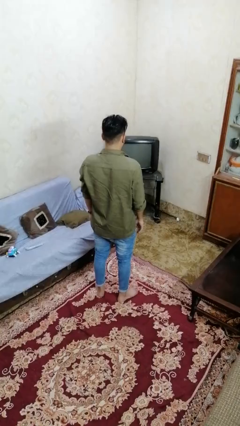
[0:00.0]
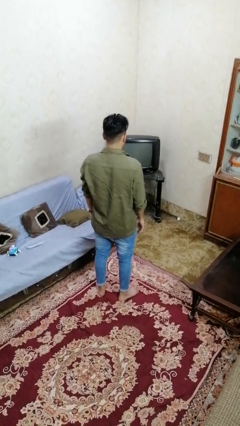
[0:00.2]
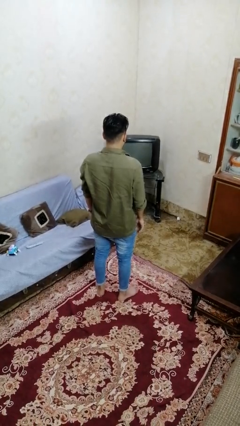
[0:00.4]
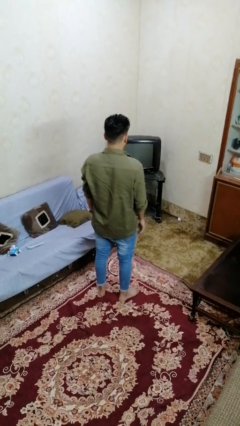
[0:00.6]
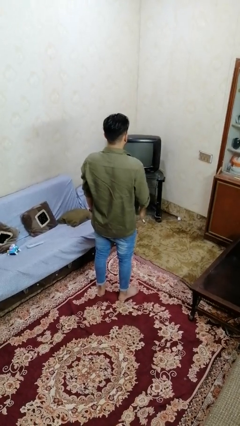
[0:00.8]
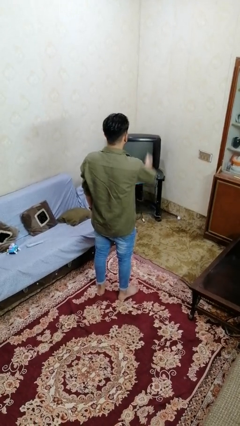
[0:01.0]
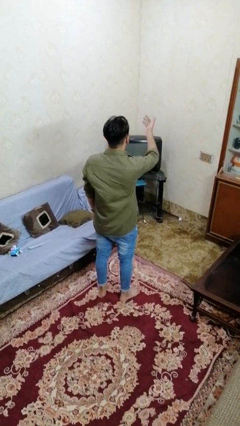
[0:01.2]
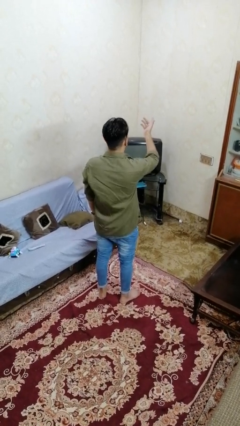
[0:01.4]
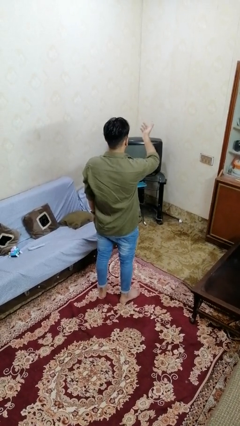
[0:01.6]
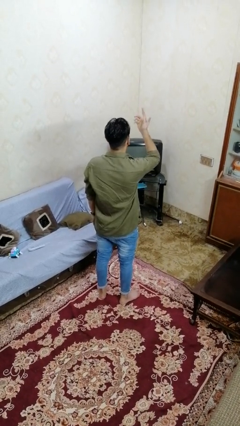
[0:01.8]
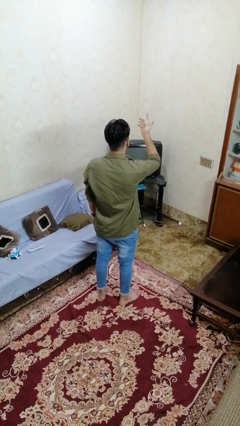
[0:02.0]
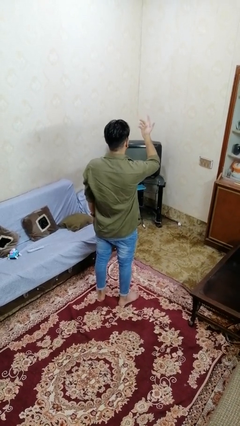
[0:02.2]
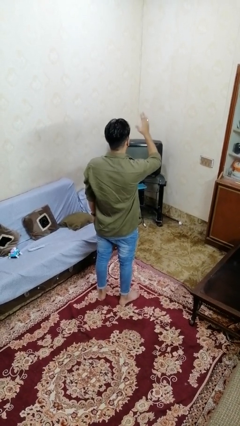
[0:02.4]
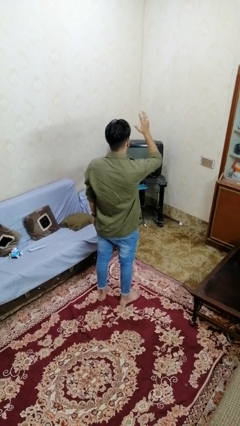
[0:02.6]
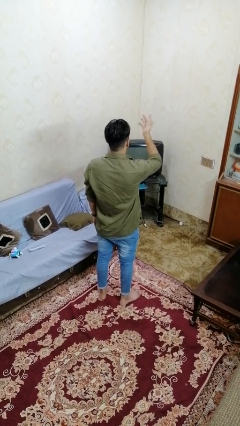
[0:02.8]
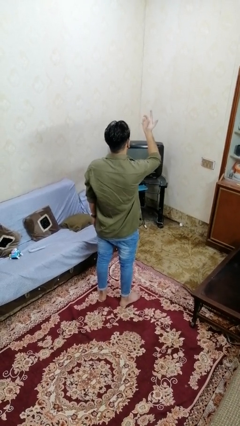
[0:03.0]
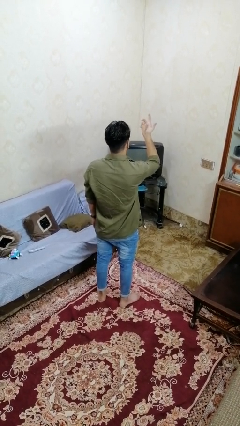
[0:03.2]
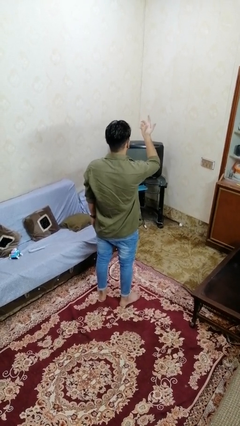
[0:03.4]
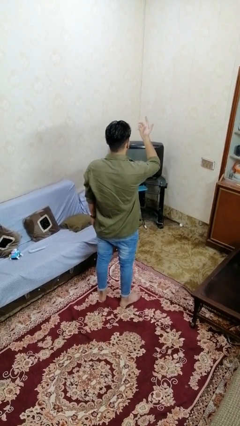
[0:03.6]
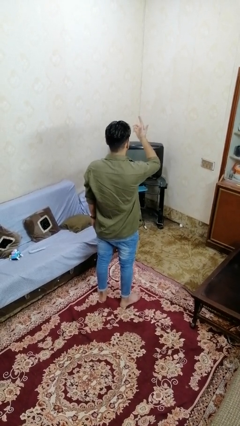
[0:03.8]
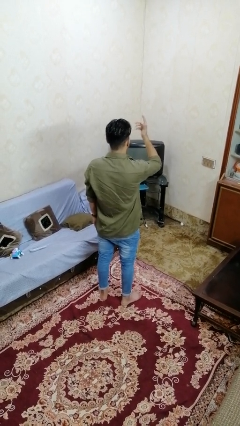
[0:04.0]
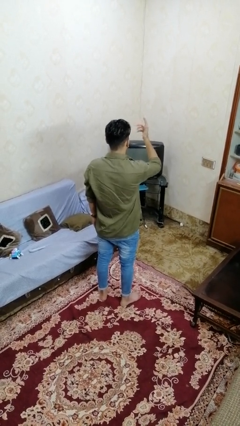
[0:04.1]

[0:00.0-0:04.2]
person gestures raise hand

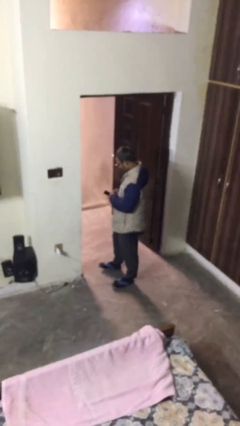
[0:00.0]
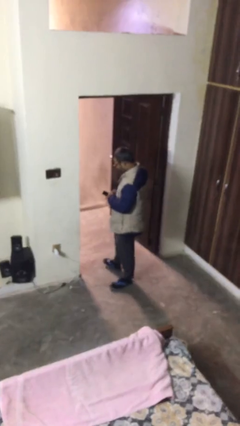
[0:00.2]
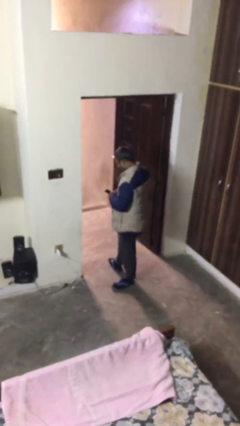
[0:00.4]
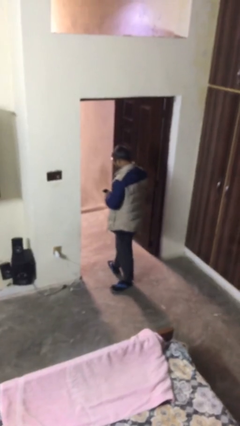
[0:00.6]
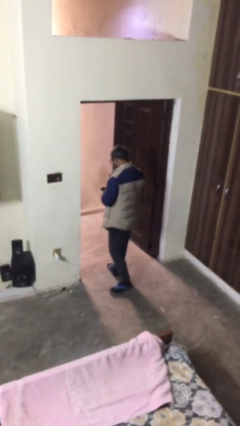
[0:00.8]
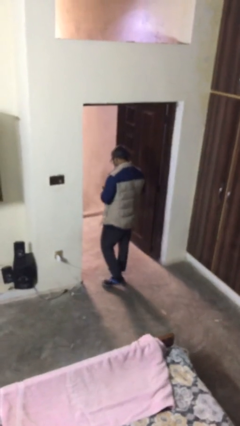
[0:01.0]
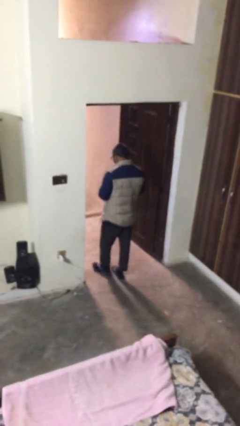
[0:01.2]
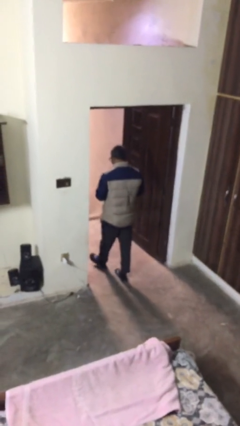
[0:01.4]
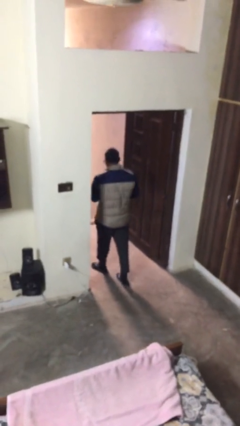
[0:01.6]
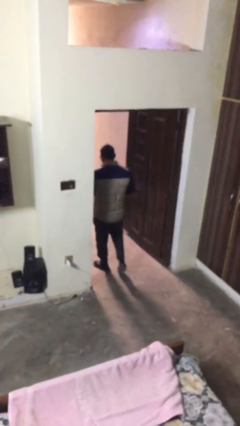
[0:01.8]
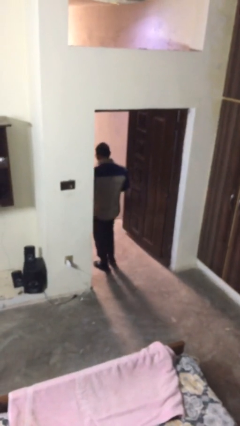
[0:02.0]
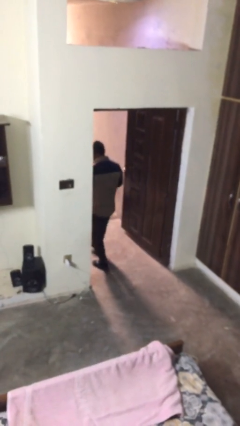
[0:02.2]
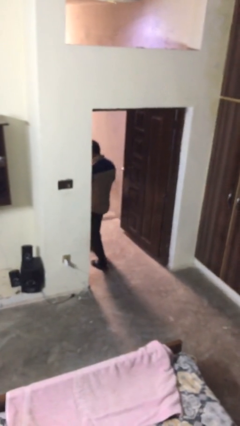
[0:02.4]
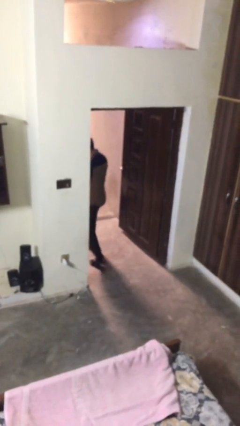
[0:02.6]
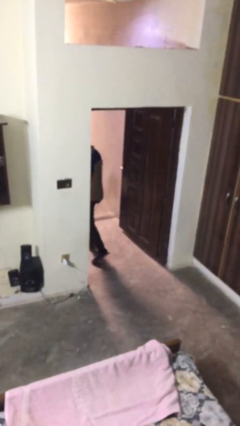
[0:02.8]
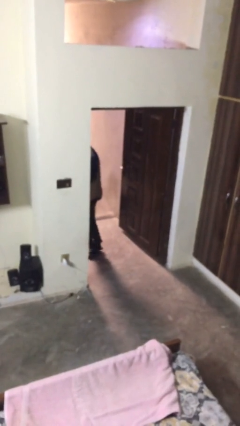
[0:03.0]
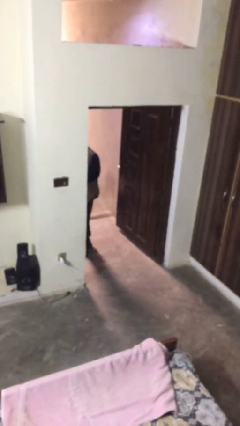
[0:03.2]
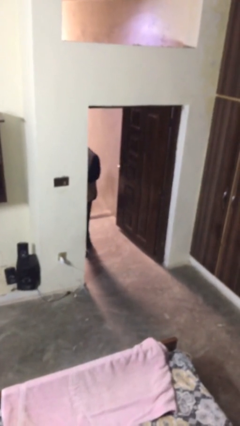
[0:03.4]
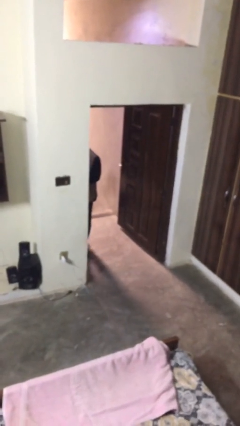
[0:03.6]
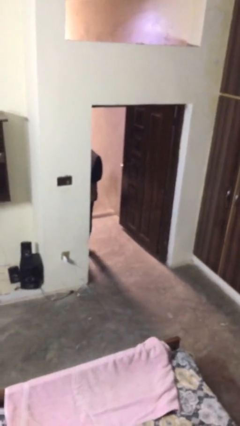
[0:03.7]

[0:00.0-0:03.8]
person exits scene through structure

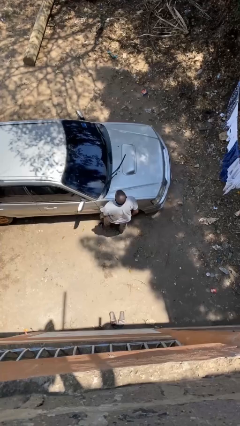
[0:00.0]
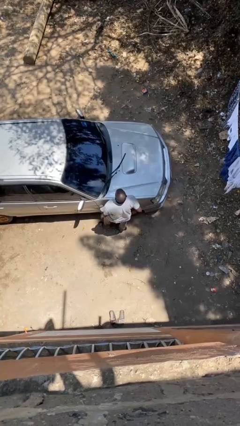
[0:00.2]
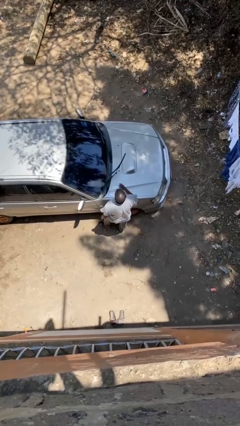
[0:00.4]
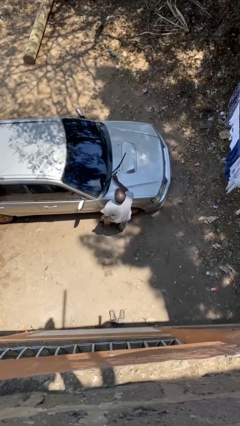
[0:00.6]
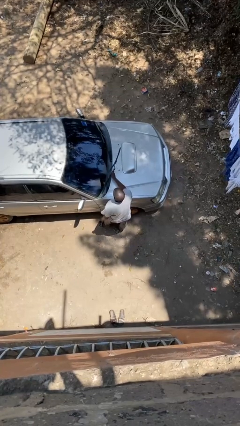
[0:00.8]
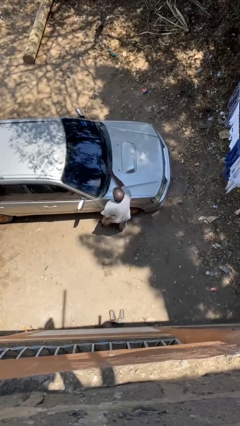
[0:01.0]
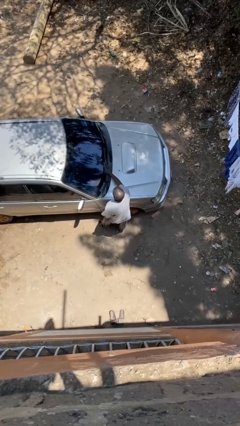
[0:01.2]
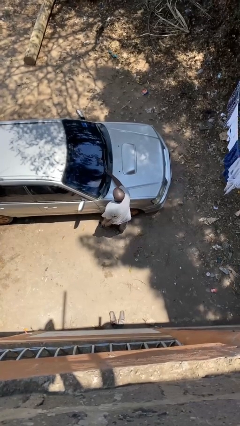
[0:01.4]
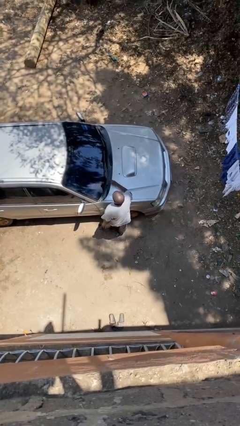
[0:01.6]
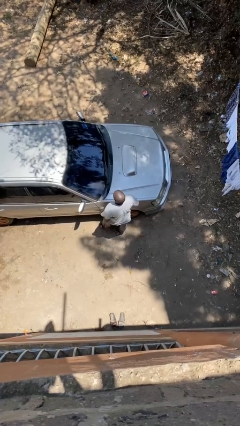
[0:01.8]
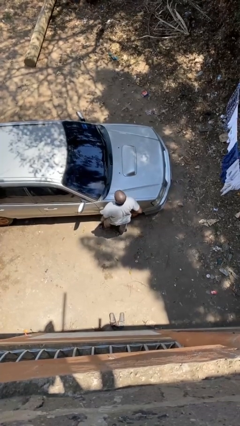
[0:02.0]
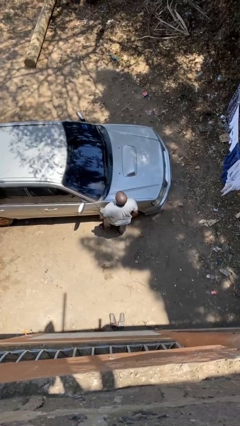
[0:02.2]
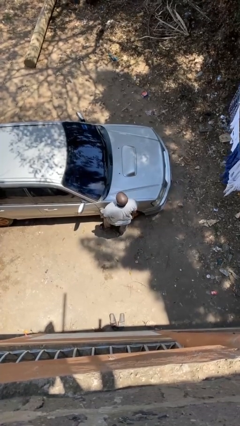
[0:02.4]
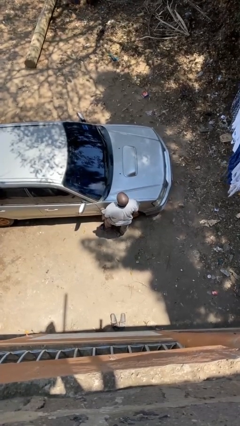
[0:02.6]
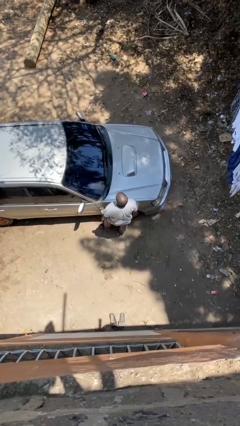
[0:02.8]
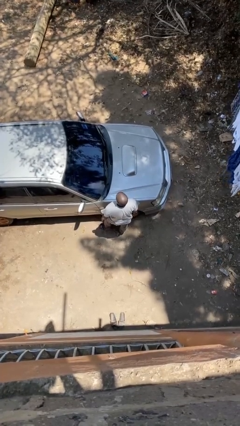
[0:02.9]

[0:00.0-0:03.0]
person flips down car wipers

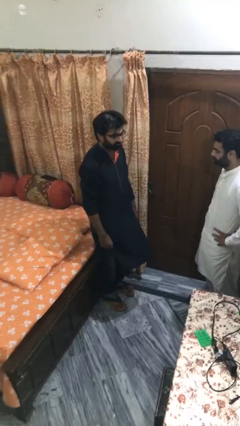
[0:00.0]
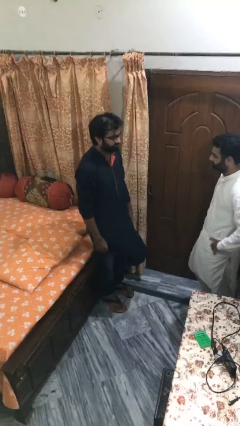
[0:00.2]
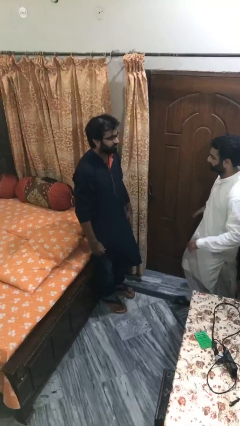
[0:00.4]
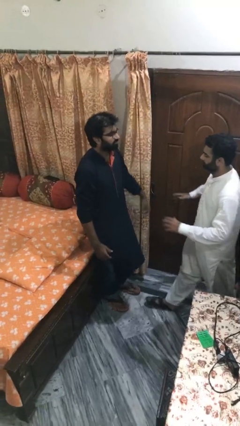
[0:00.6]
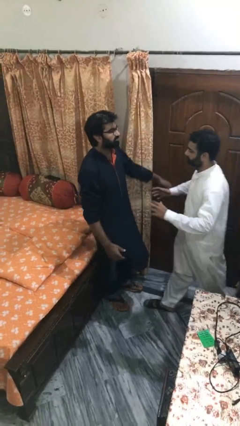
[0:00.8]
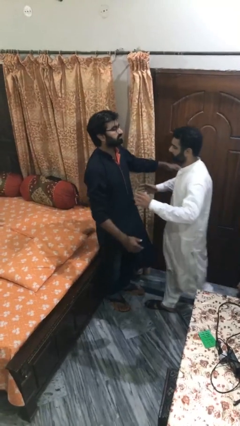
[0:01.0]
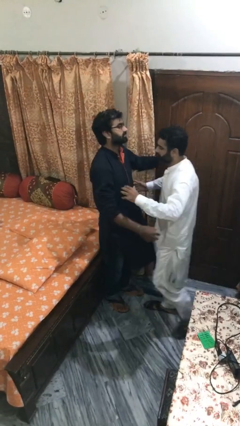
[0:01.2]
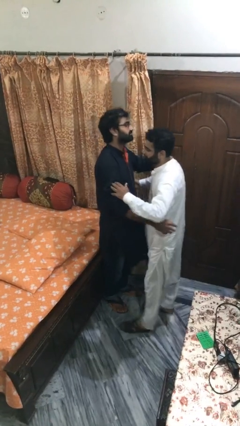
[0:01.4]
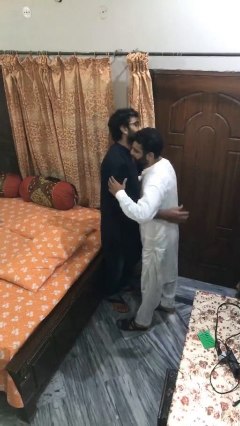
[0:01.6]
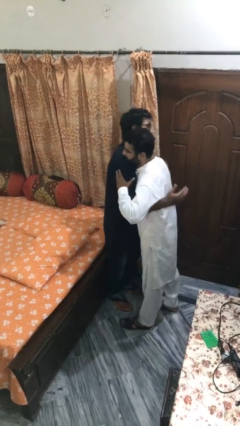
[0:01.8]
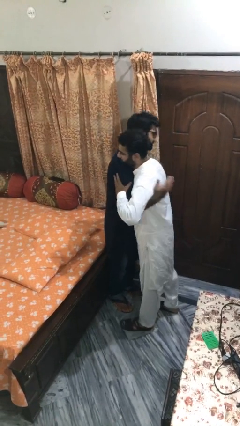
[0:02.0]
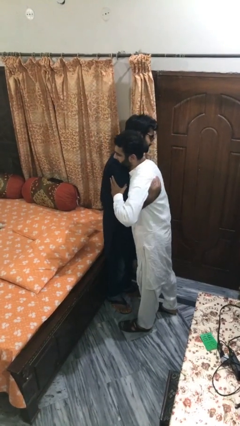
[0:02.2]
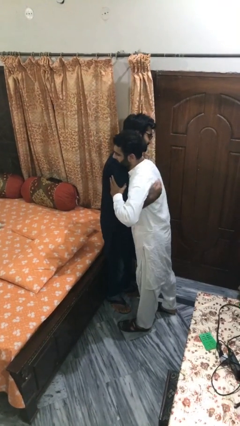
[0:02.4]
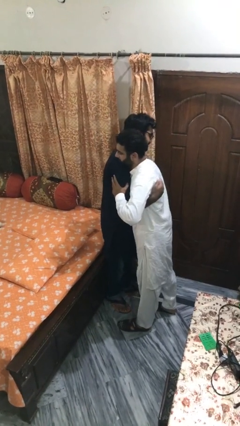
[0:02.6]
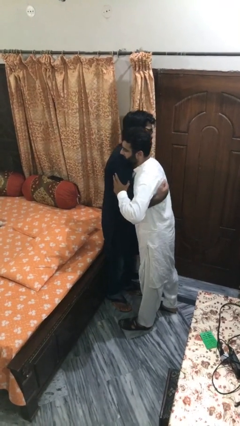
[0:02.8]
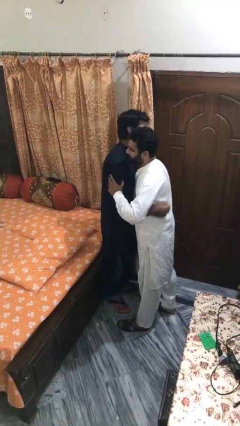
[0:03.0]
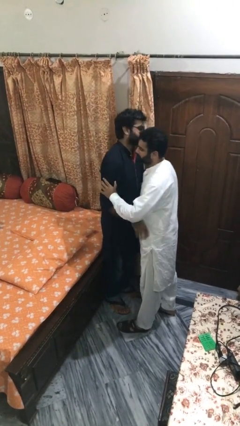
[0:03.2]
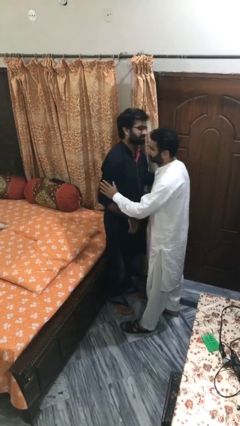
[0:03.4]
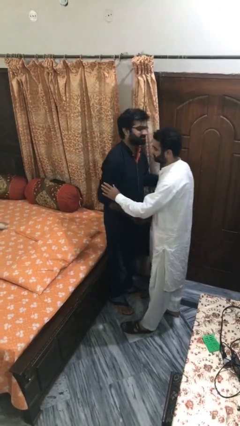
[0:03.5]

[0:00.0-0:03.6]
person embraces person

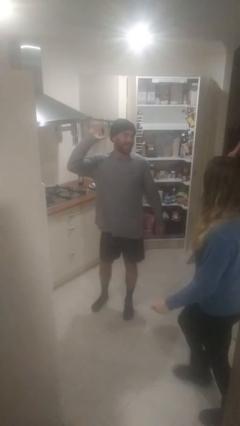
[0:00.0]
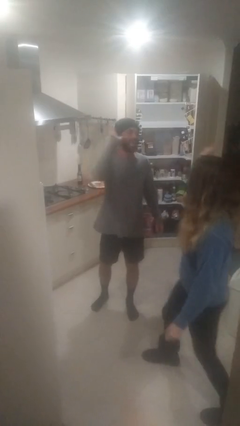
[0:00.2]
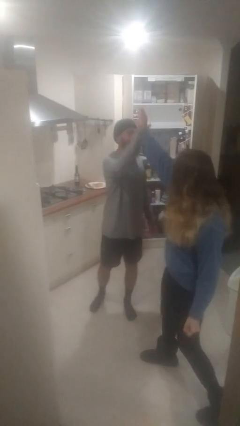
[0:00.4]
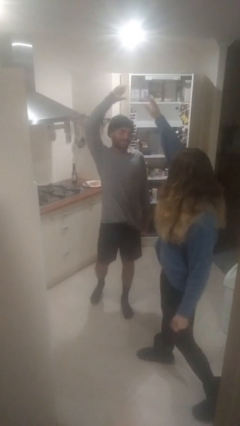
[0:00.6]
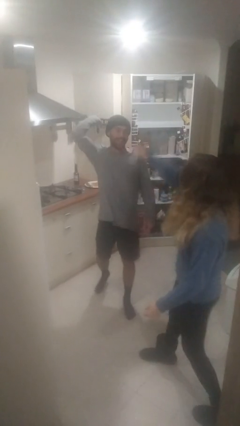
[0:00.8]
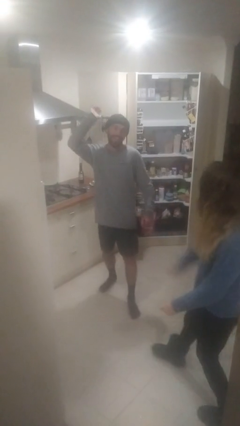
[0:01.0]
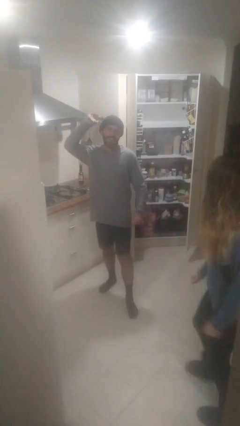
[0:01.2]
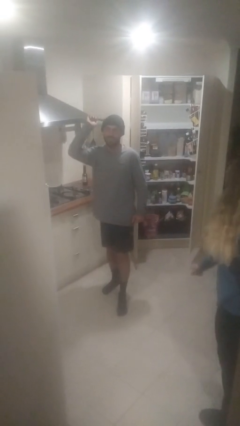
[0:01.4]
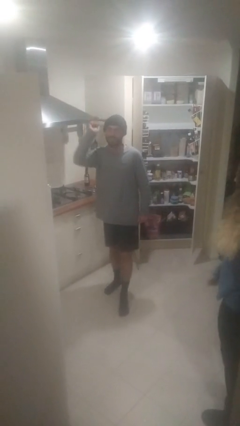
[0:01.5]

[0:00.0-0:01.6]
person highfives hand

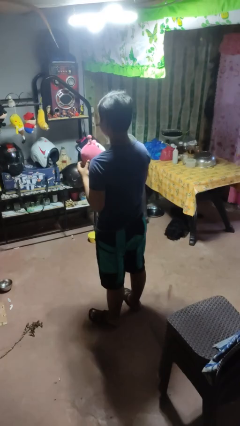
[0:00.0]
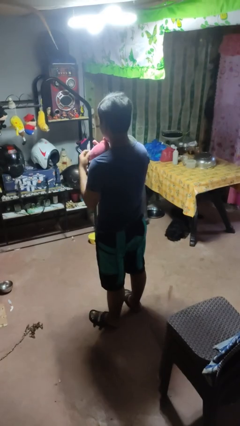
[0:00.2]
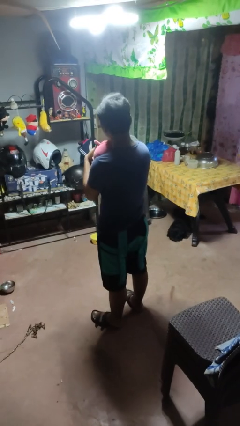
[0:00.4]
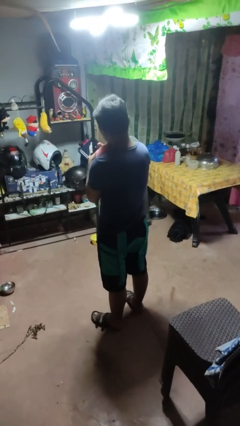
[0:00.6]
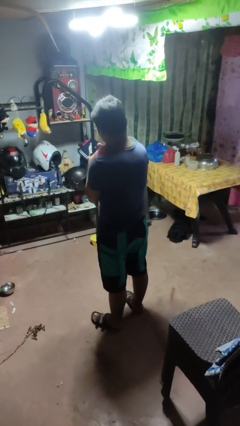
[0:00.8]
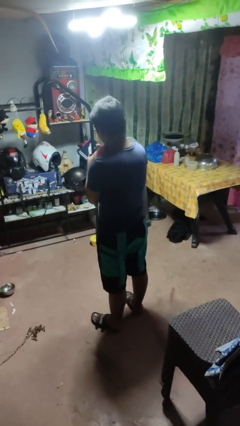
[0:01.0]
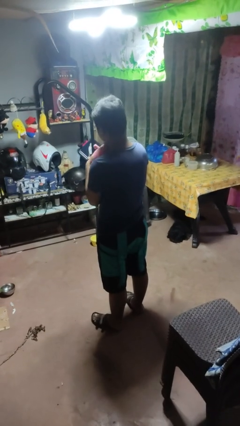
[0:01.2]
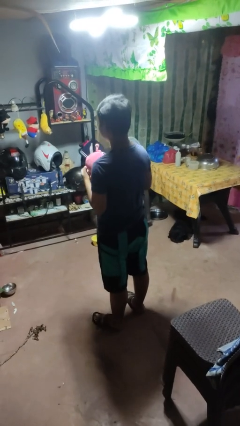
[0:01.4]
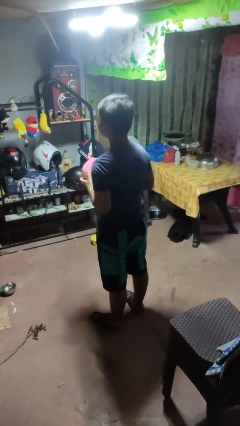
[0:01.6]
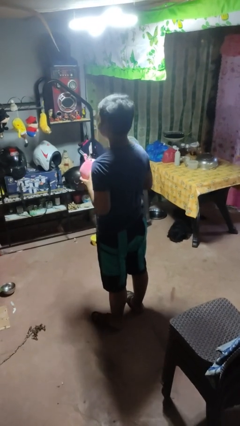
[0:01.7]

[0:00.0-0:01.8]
person hugs stuffed animal
